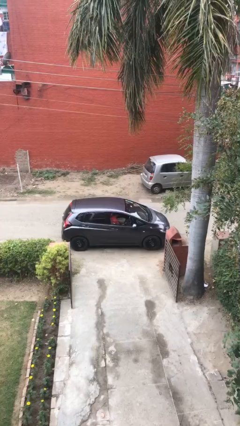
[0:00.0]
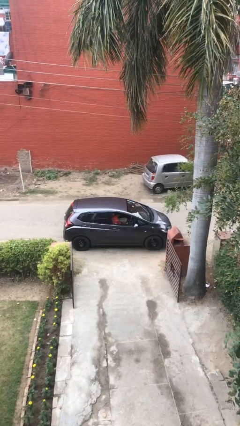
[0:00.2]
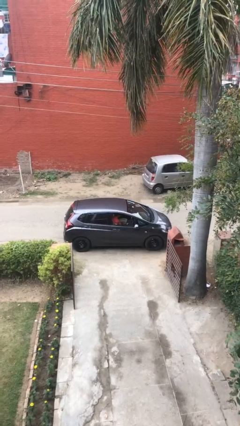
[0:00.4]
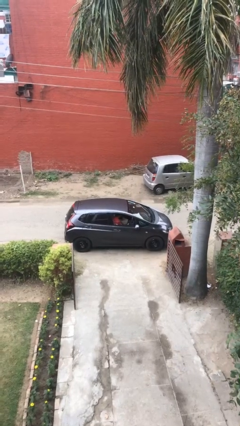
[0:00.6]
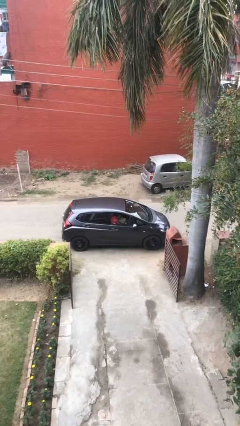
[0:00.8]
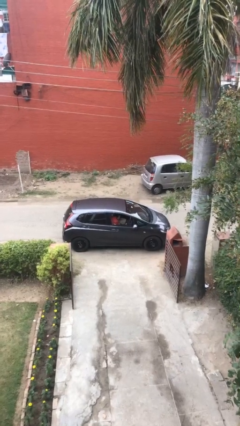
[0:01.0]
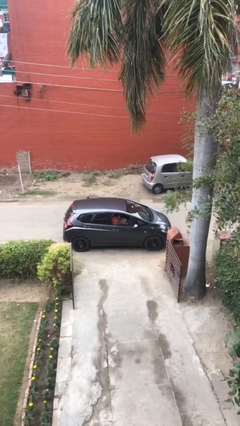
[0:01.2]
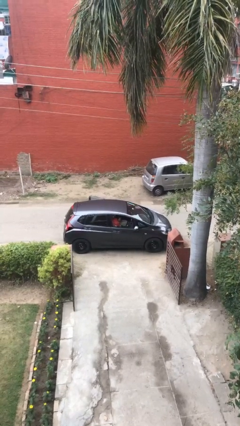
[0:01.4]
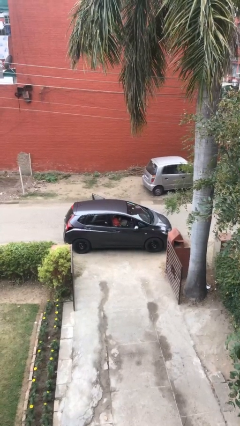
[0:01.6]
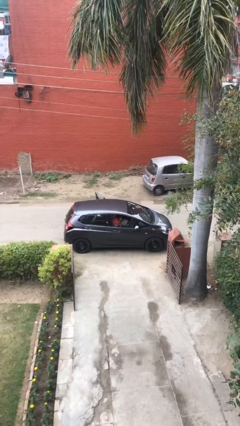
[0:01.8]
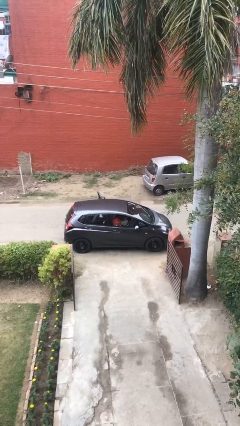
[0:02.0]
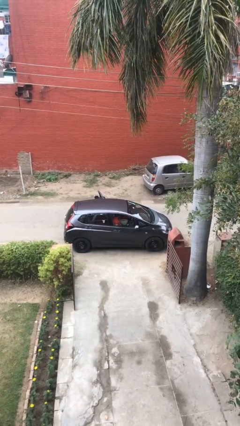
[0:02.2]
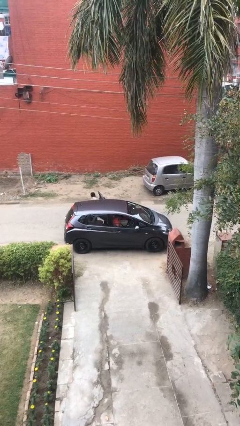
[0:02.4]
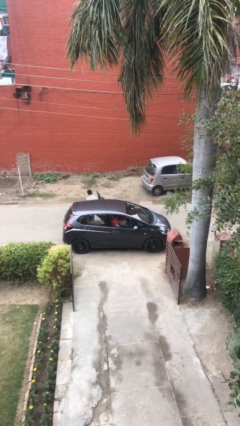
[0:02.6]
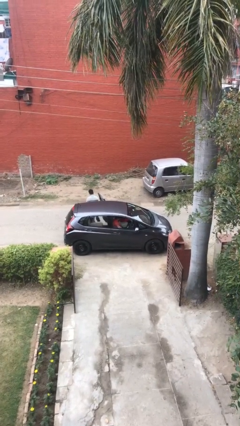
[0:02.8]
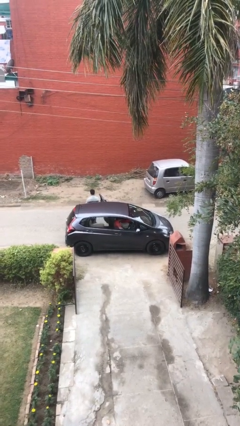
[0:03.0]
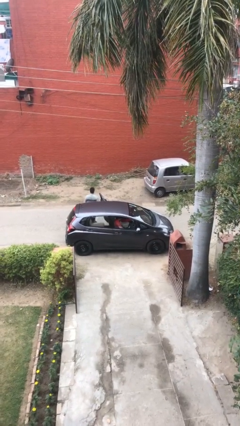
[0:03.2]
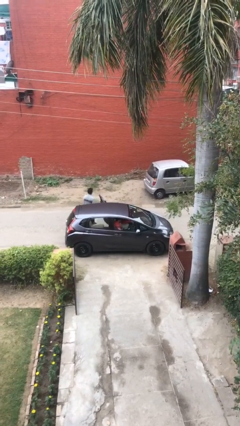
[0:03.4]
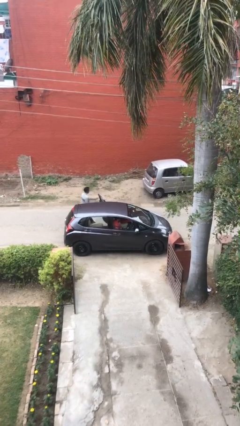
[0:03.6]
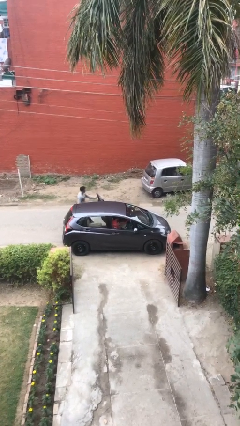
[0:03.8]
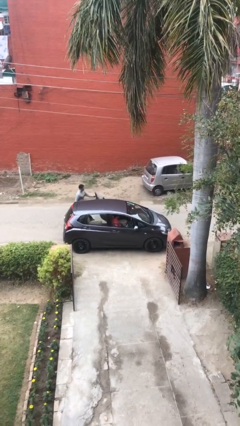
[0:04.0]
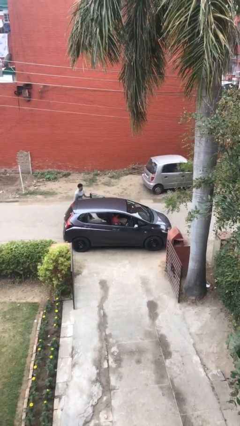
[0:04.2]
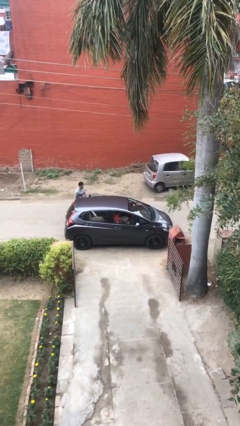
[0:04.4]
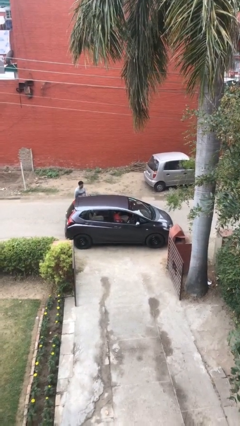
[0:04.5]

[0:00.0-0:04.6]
car drops off person

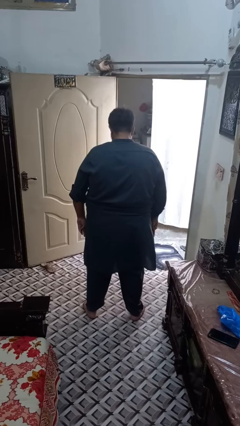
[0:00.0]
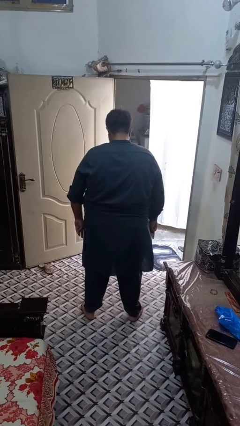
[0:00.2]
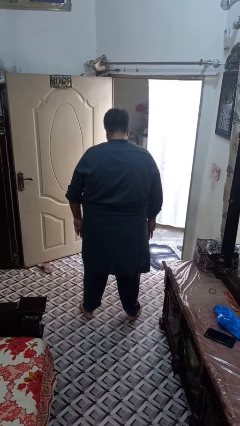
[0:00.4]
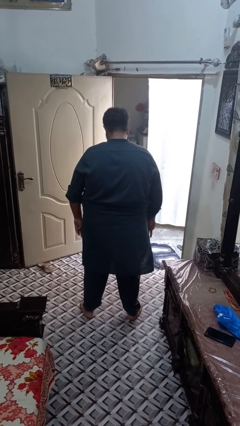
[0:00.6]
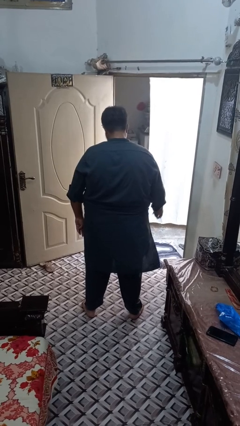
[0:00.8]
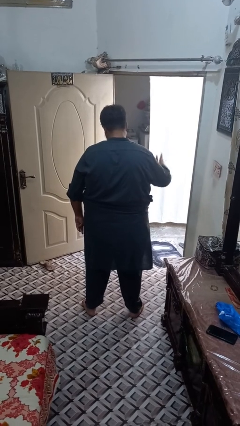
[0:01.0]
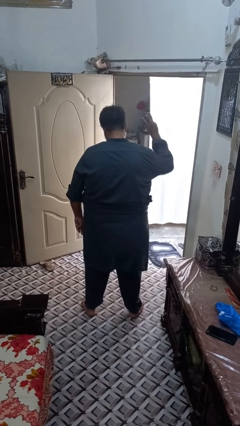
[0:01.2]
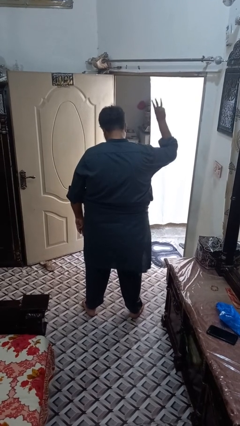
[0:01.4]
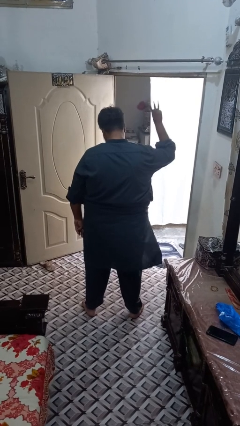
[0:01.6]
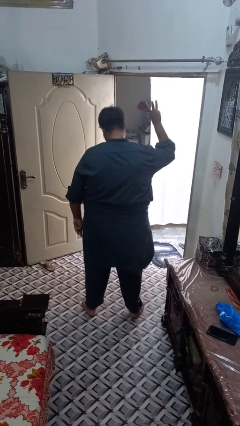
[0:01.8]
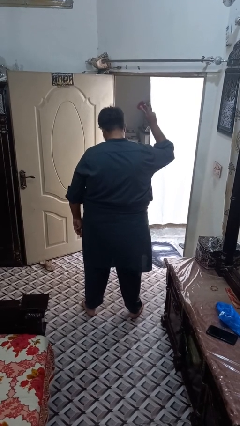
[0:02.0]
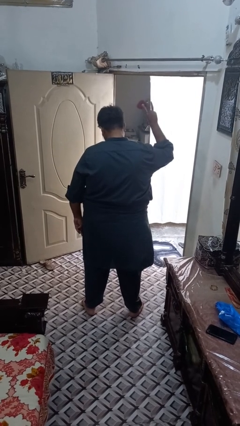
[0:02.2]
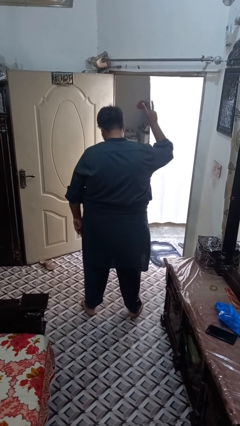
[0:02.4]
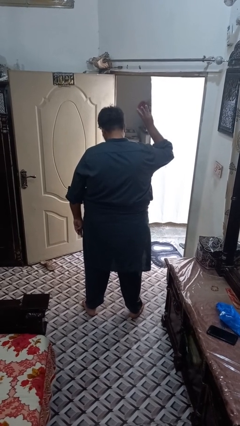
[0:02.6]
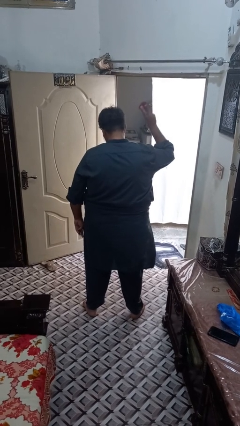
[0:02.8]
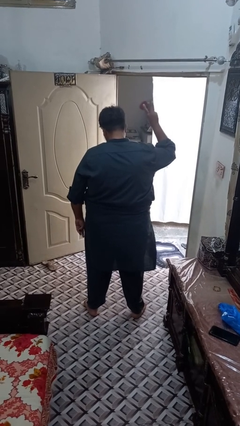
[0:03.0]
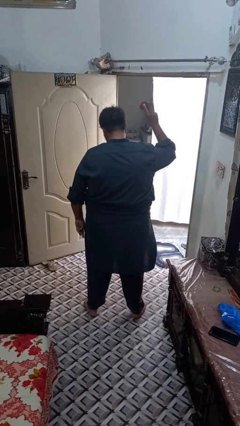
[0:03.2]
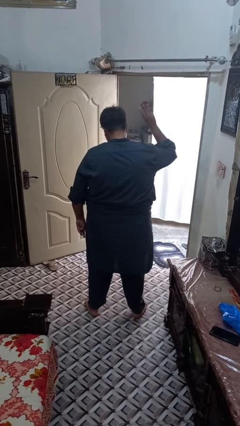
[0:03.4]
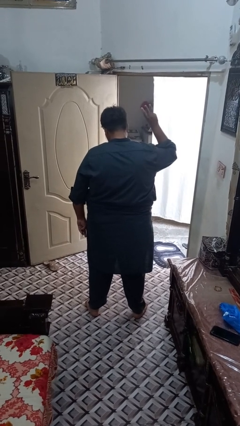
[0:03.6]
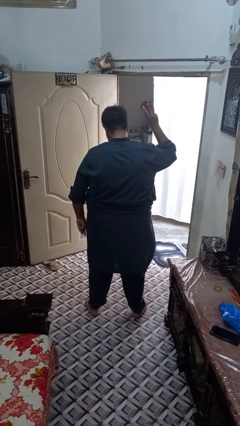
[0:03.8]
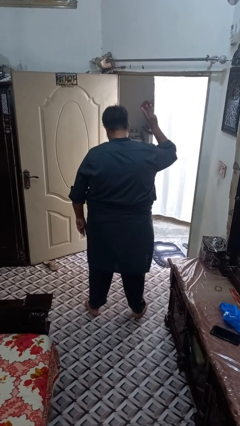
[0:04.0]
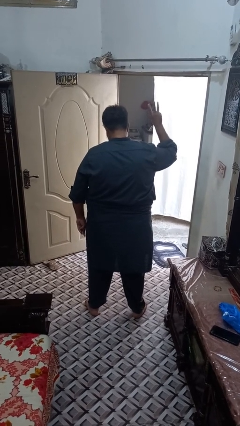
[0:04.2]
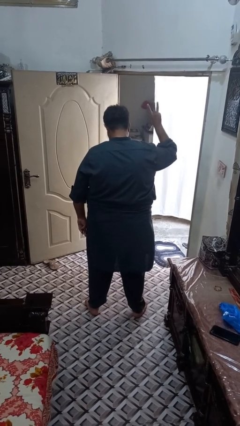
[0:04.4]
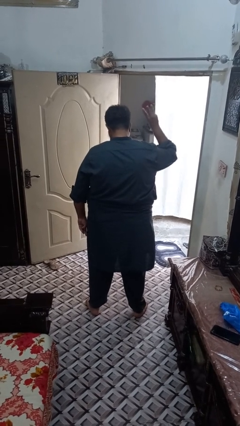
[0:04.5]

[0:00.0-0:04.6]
person gestures number three

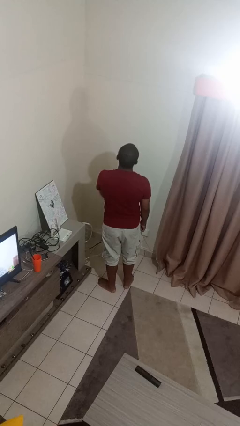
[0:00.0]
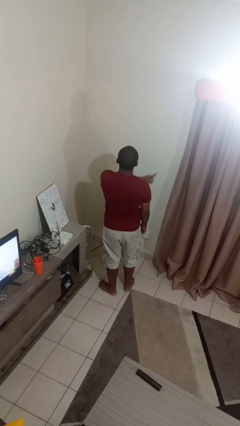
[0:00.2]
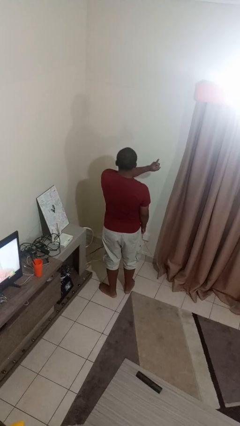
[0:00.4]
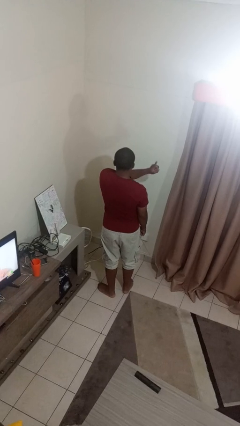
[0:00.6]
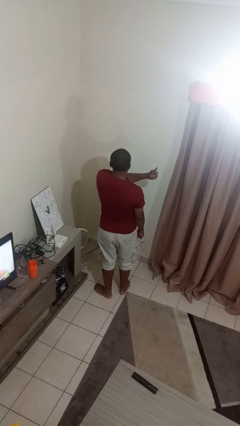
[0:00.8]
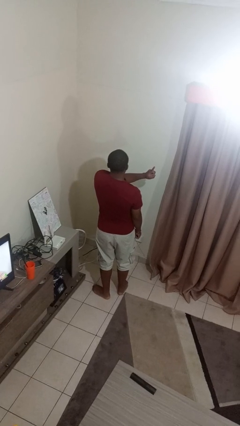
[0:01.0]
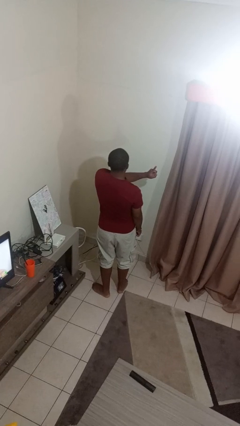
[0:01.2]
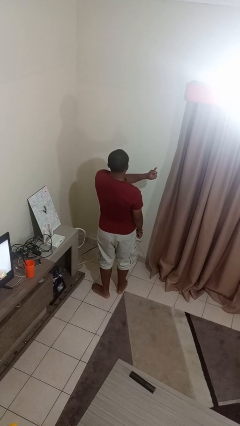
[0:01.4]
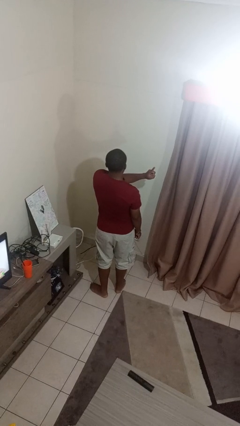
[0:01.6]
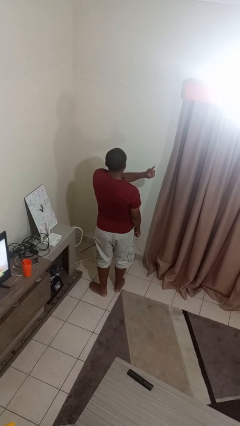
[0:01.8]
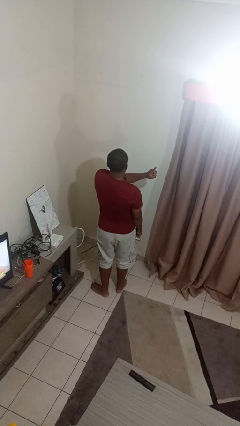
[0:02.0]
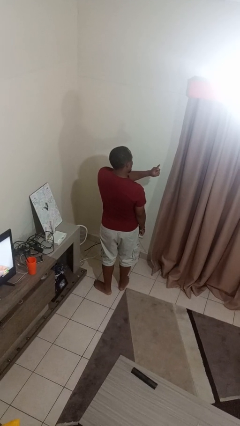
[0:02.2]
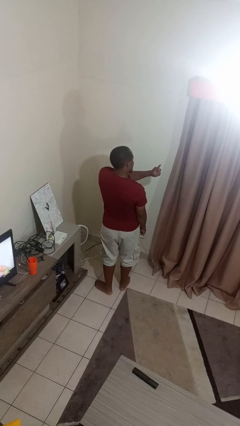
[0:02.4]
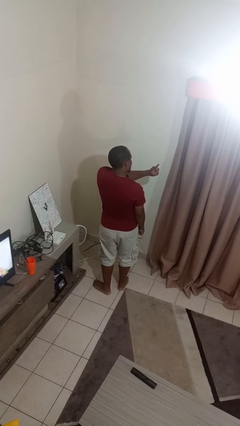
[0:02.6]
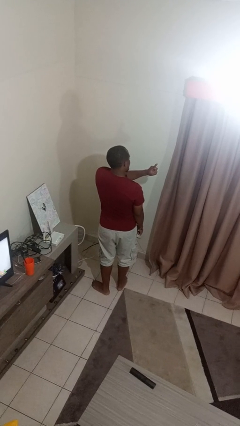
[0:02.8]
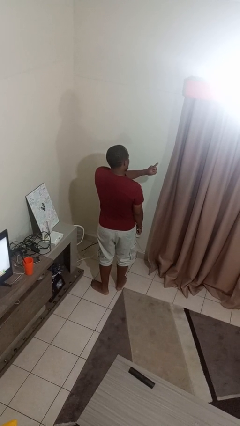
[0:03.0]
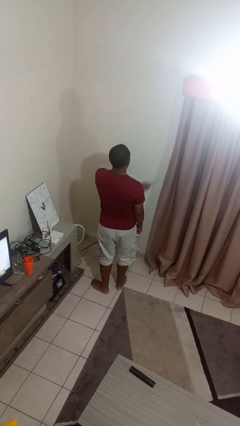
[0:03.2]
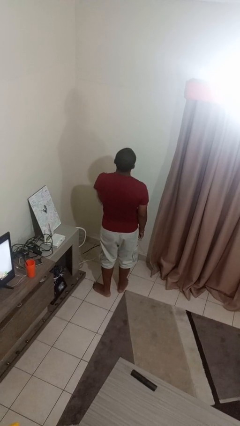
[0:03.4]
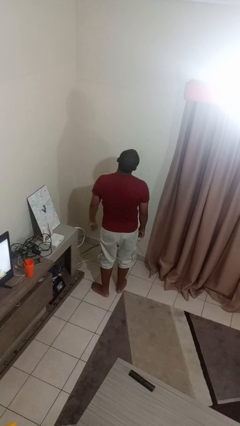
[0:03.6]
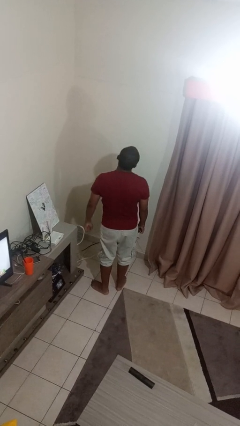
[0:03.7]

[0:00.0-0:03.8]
person gestures number one

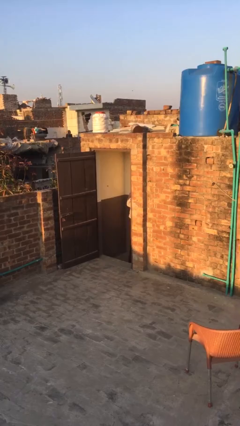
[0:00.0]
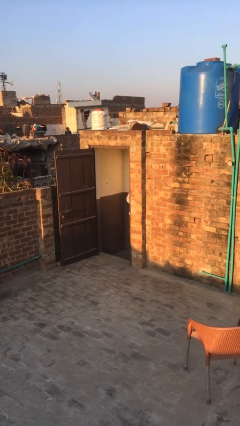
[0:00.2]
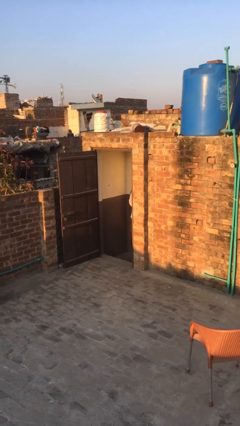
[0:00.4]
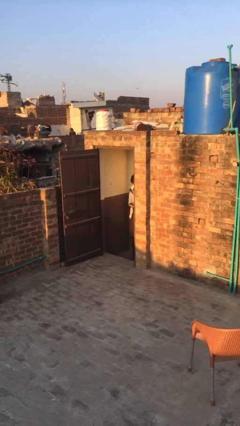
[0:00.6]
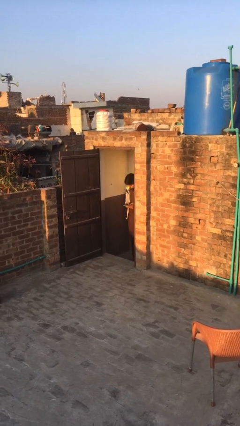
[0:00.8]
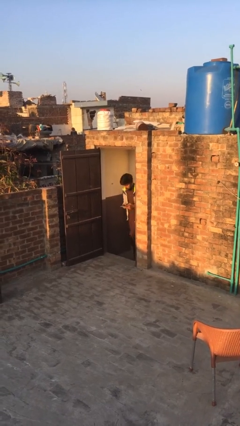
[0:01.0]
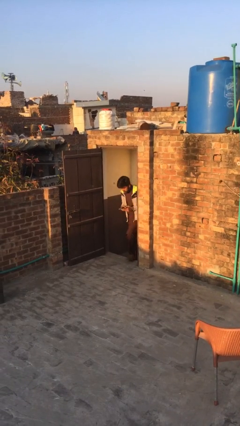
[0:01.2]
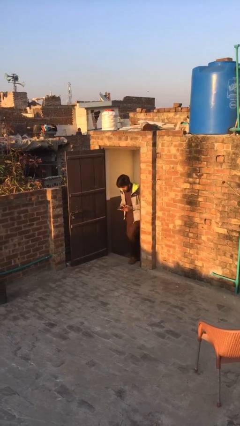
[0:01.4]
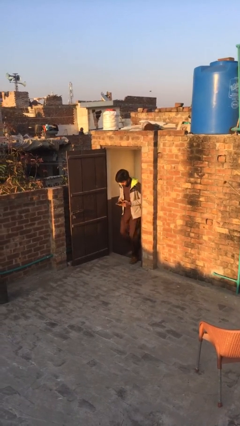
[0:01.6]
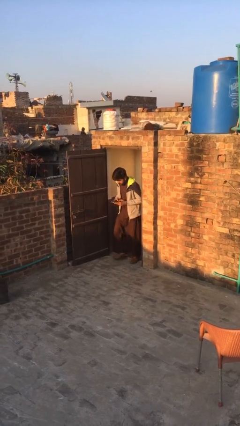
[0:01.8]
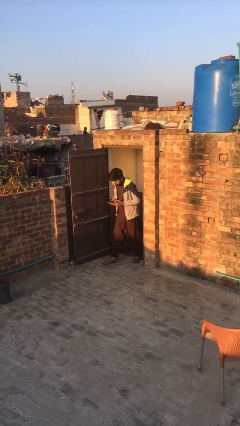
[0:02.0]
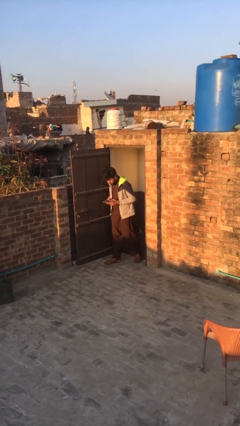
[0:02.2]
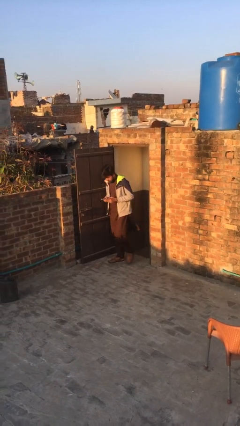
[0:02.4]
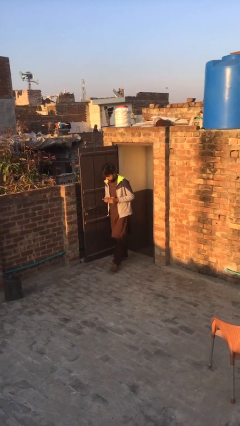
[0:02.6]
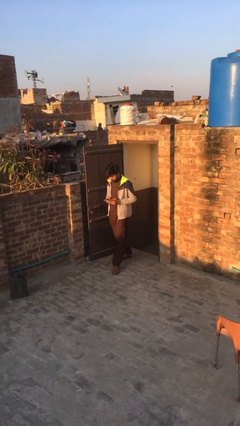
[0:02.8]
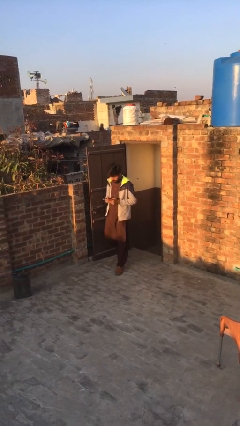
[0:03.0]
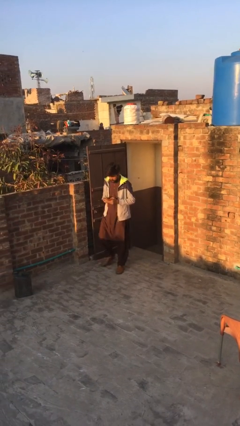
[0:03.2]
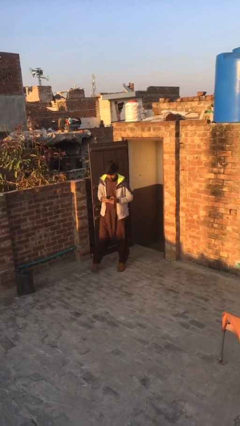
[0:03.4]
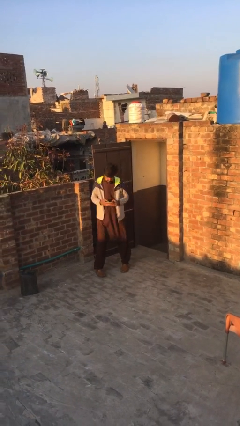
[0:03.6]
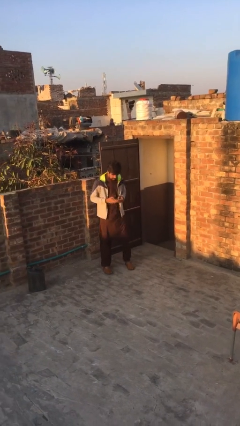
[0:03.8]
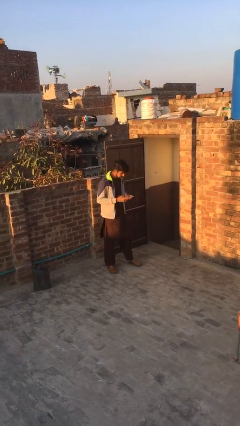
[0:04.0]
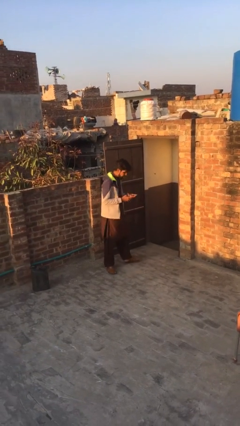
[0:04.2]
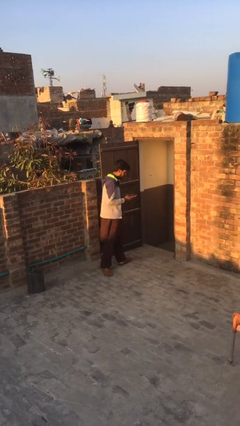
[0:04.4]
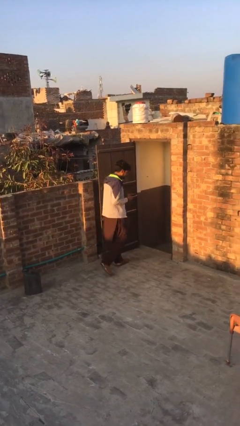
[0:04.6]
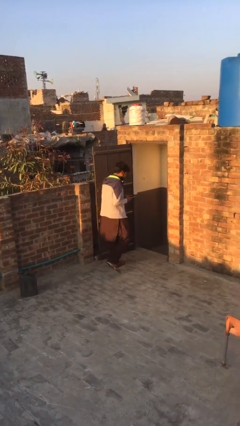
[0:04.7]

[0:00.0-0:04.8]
person exits scene through structure
